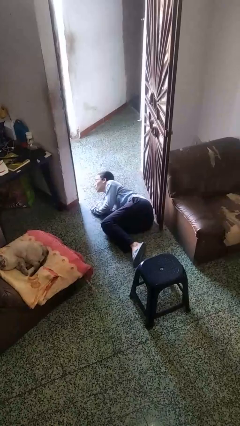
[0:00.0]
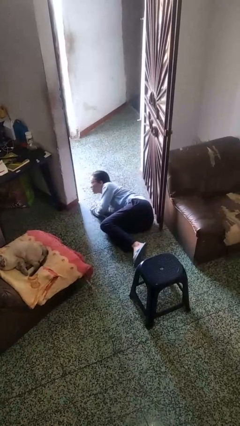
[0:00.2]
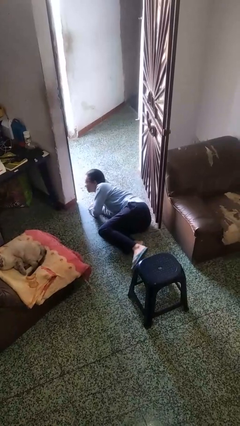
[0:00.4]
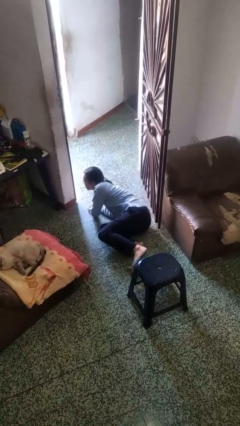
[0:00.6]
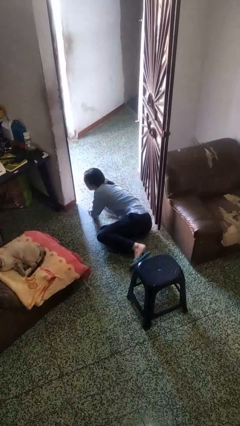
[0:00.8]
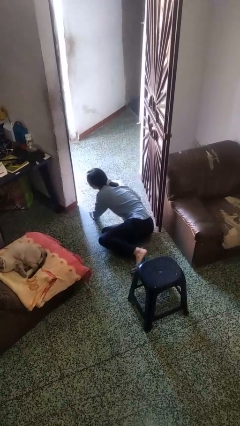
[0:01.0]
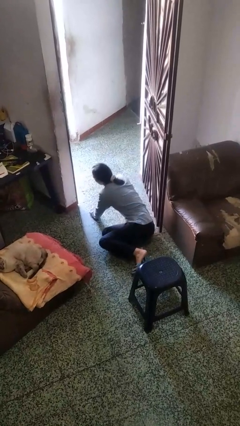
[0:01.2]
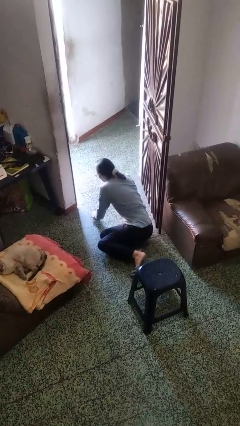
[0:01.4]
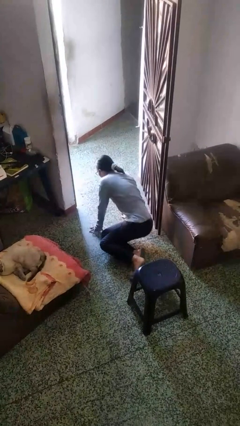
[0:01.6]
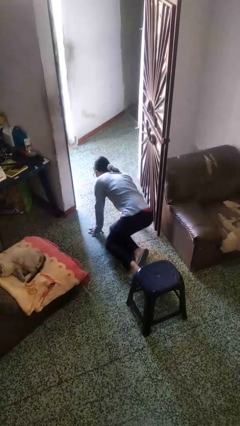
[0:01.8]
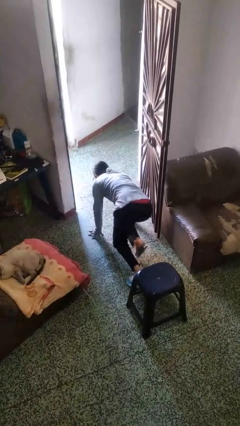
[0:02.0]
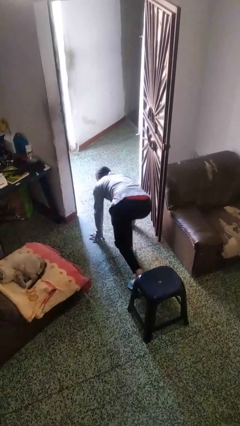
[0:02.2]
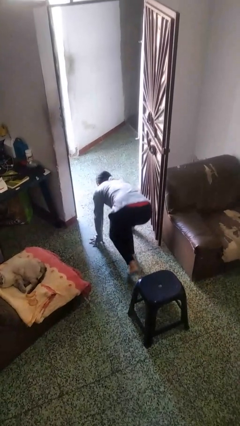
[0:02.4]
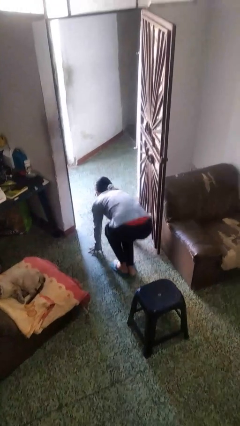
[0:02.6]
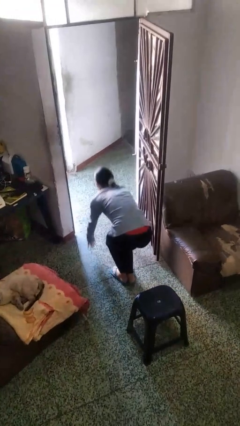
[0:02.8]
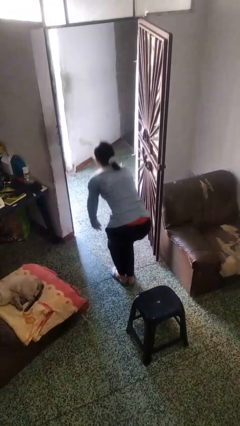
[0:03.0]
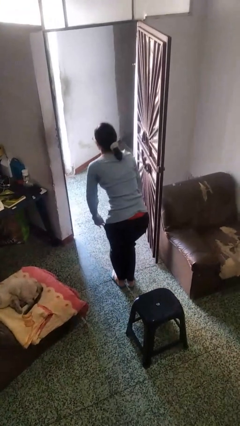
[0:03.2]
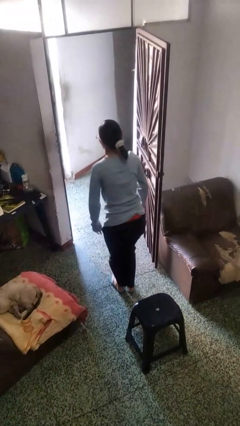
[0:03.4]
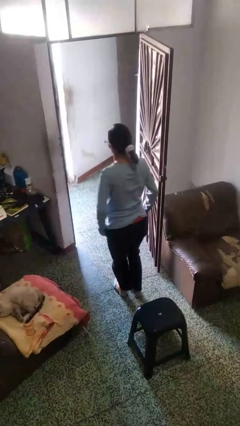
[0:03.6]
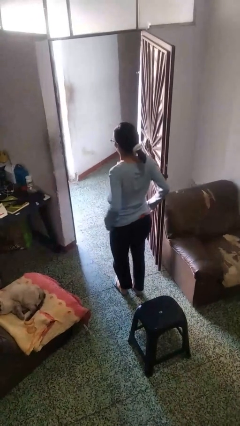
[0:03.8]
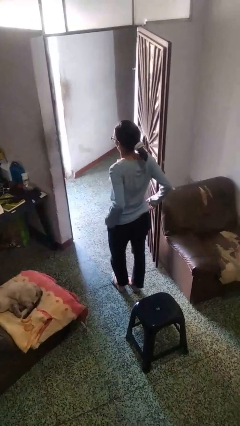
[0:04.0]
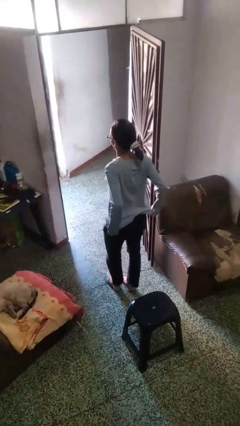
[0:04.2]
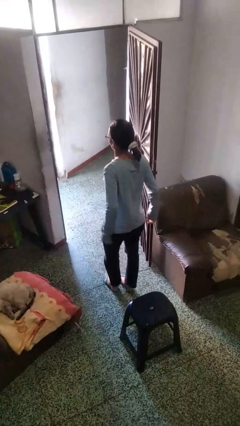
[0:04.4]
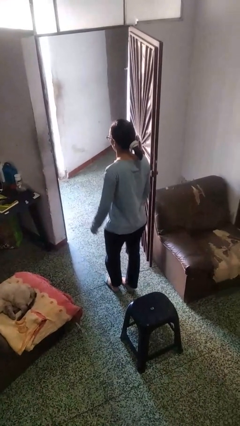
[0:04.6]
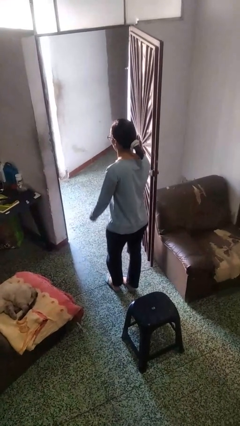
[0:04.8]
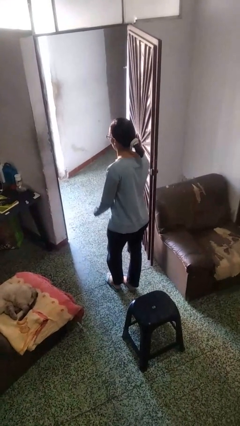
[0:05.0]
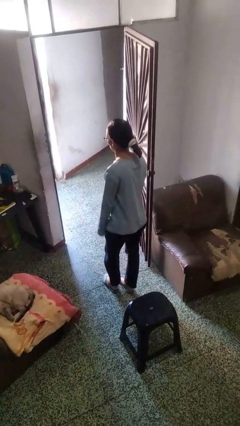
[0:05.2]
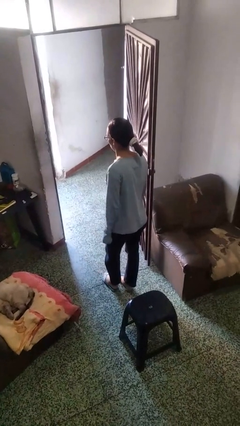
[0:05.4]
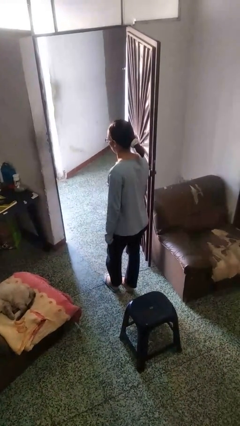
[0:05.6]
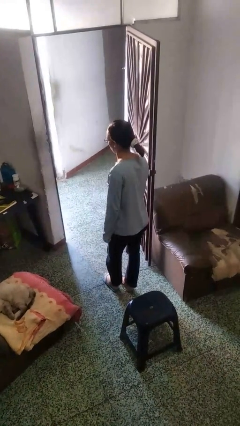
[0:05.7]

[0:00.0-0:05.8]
person stands up from floor

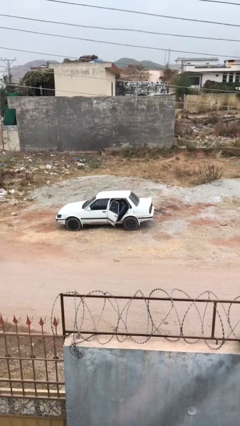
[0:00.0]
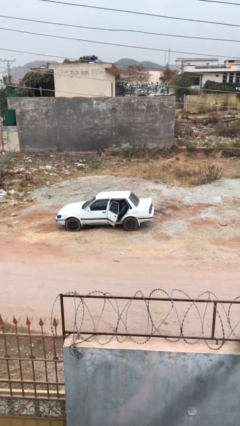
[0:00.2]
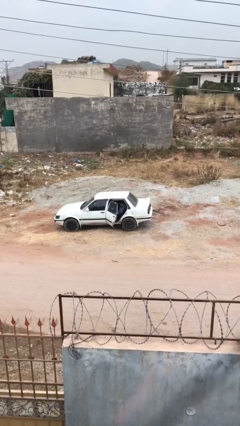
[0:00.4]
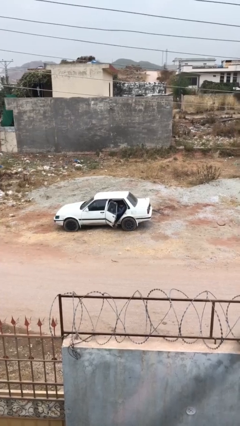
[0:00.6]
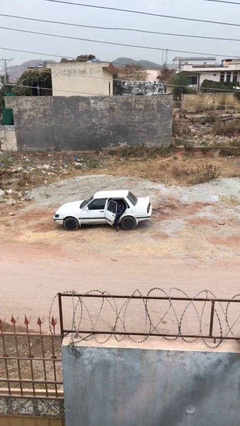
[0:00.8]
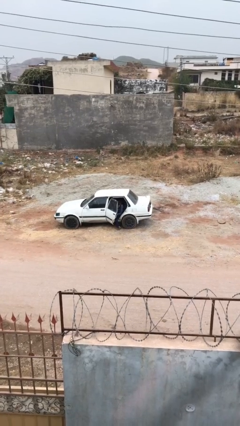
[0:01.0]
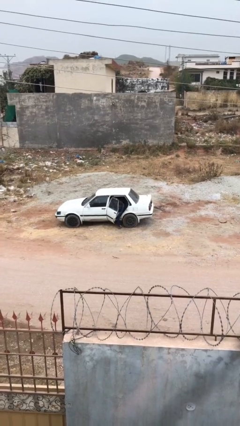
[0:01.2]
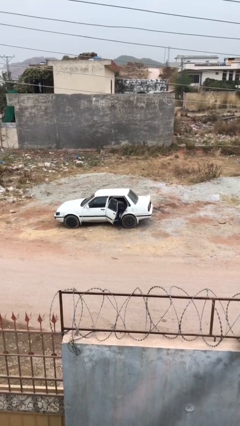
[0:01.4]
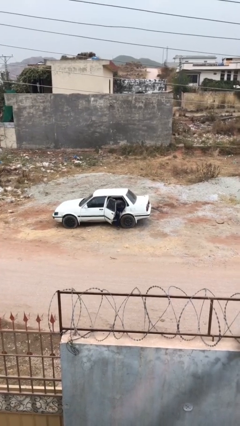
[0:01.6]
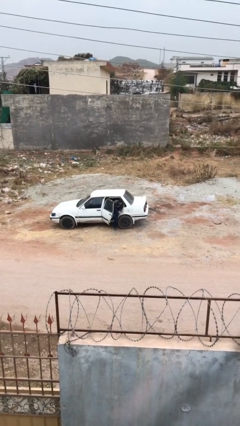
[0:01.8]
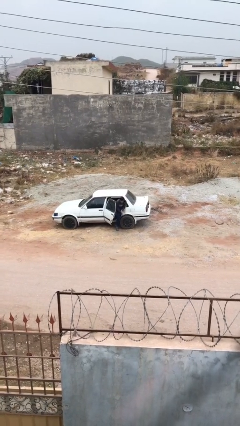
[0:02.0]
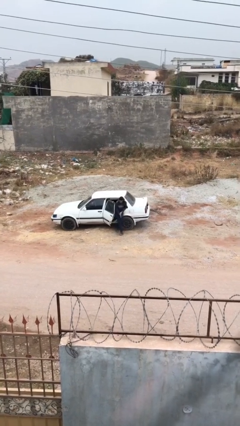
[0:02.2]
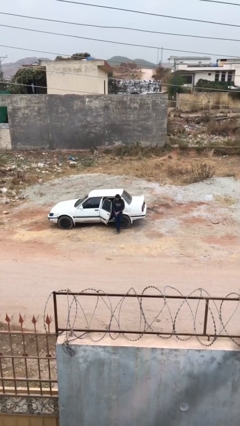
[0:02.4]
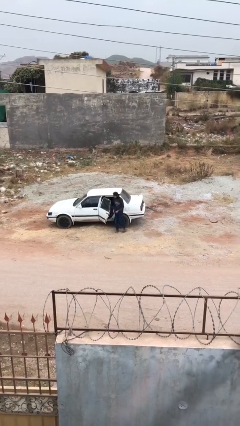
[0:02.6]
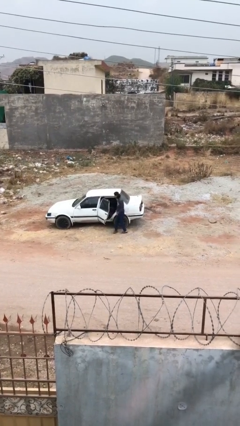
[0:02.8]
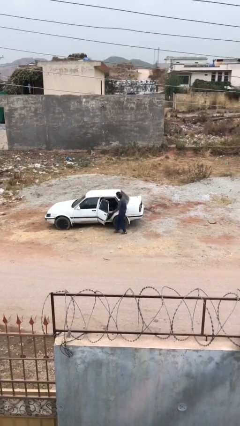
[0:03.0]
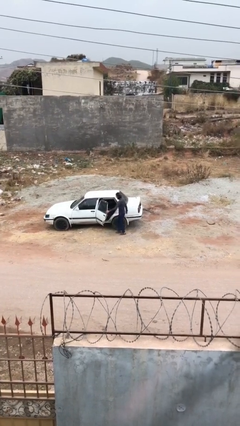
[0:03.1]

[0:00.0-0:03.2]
person exits car

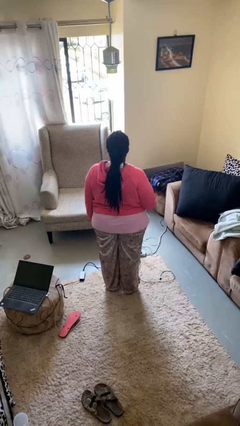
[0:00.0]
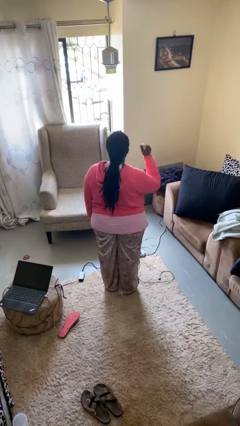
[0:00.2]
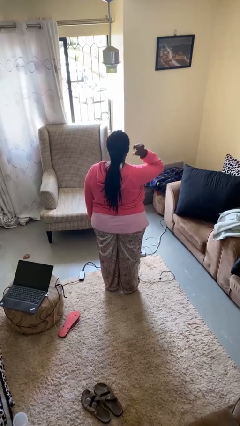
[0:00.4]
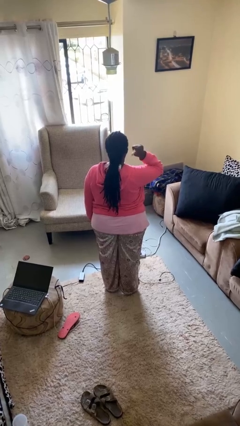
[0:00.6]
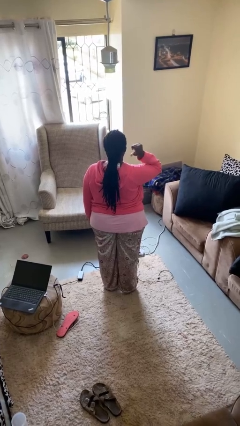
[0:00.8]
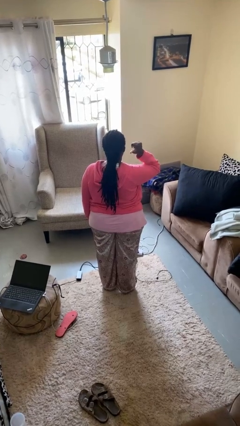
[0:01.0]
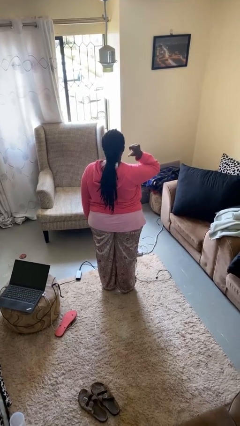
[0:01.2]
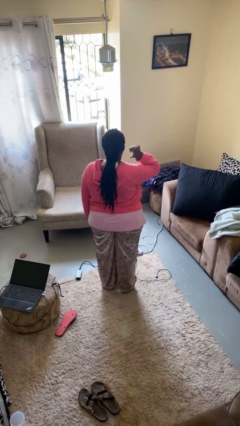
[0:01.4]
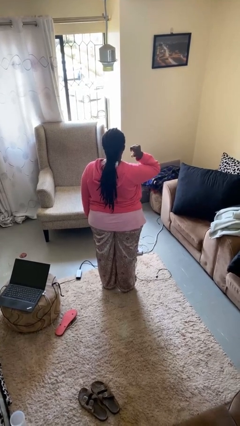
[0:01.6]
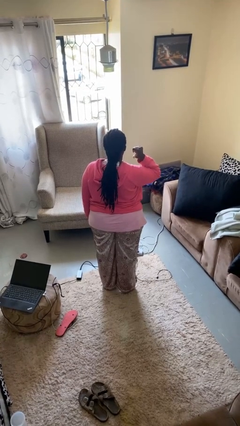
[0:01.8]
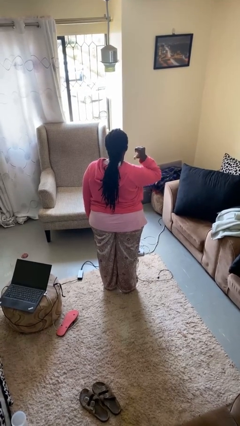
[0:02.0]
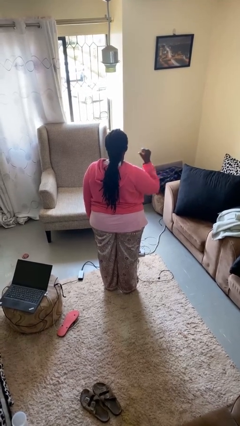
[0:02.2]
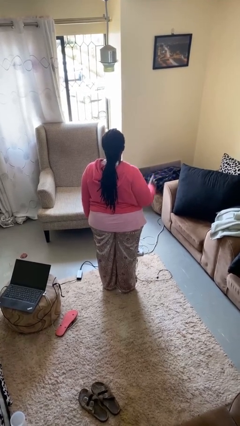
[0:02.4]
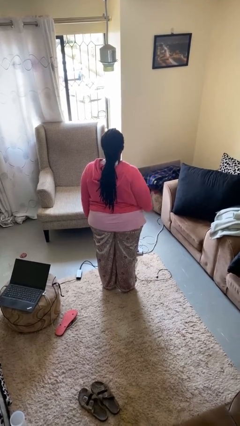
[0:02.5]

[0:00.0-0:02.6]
person gestures behind me

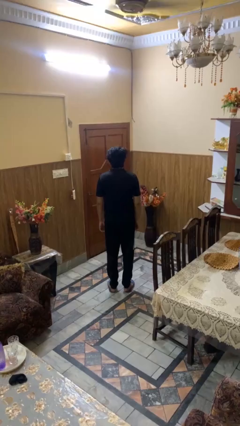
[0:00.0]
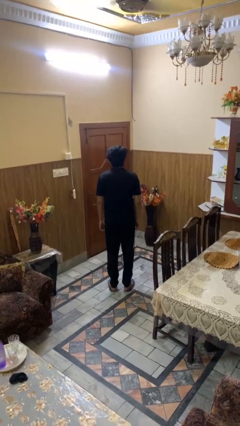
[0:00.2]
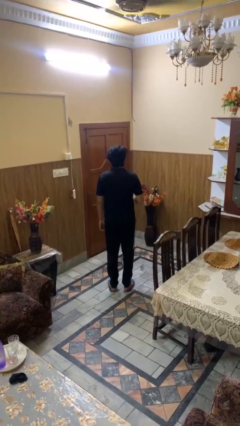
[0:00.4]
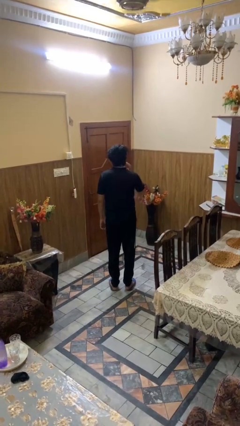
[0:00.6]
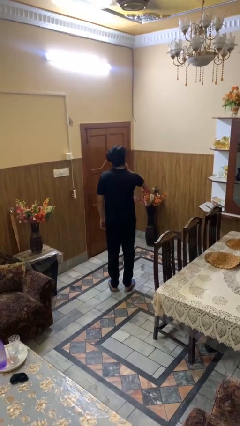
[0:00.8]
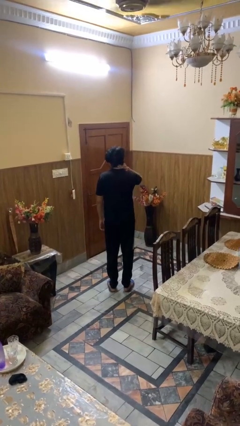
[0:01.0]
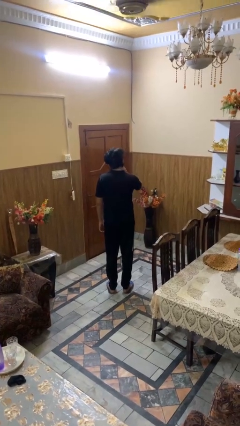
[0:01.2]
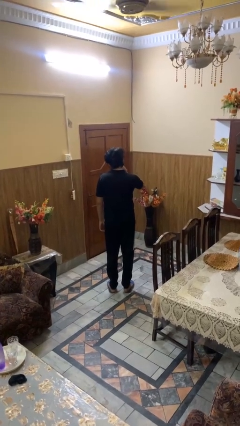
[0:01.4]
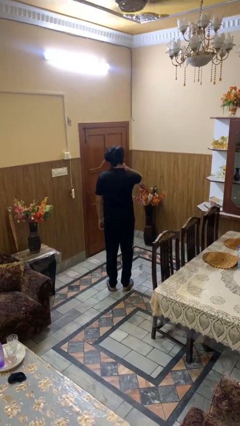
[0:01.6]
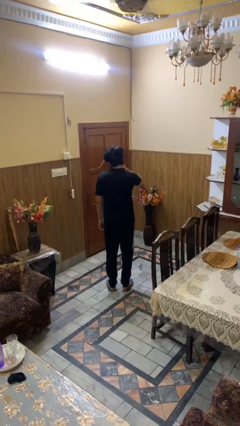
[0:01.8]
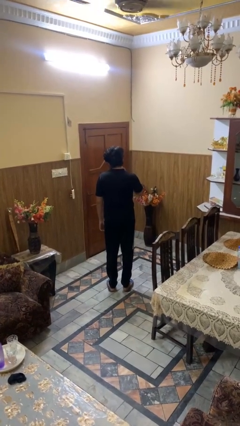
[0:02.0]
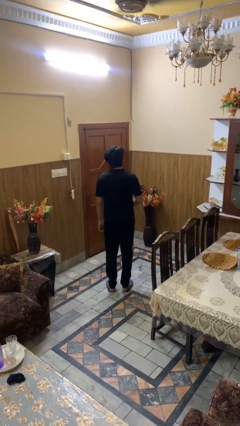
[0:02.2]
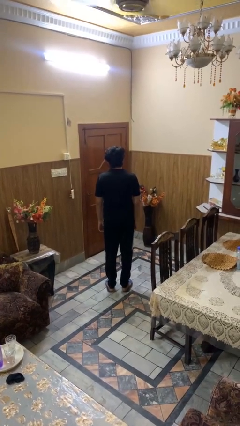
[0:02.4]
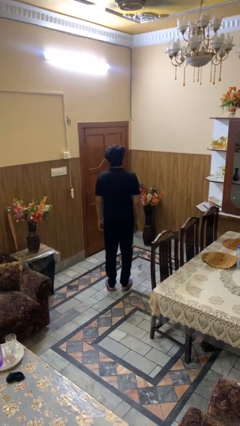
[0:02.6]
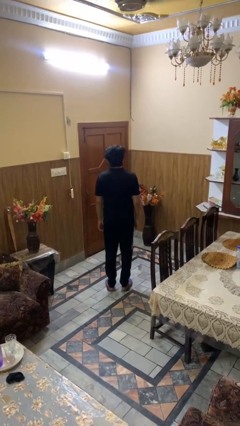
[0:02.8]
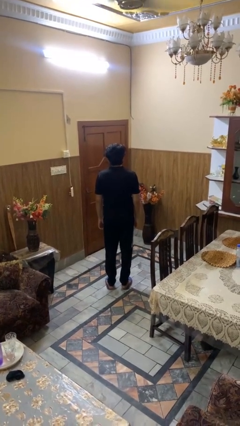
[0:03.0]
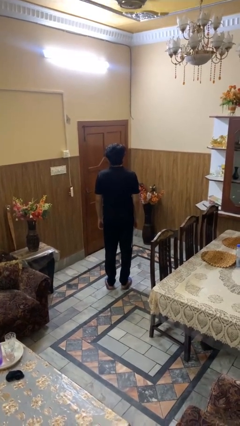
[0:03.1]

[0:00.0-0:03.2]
person rubs neck

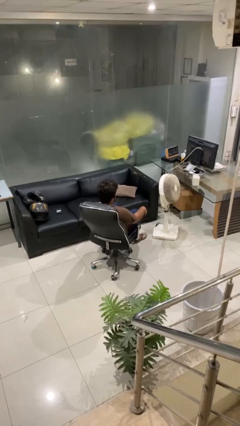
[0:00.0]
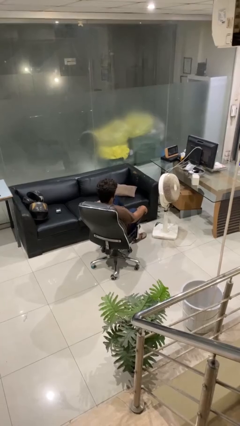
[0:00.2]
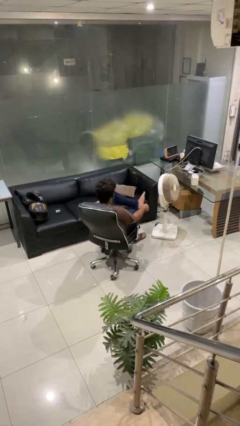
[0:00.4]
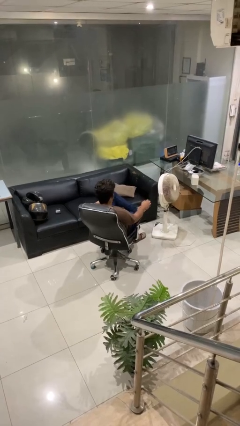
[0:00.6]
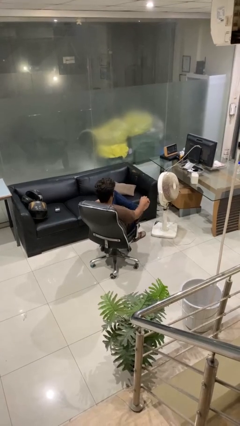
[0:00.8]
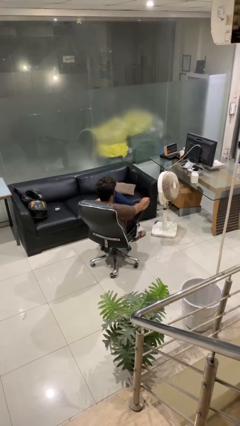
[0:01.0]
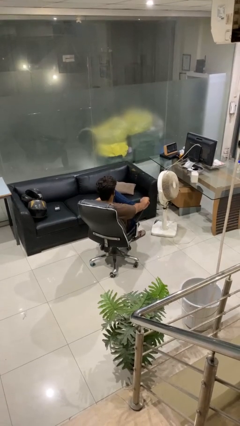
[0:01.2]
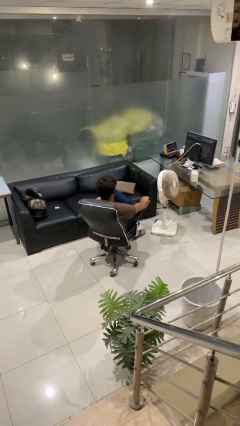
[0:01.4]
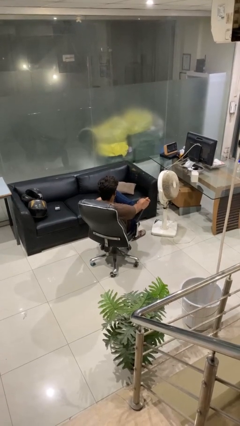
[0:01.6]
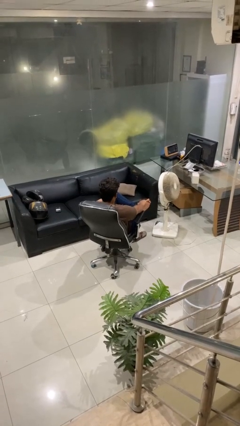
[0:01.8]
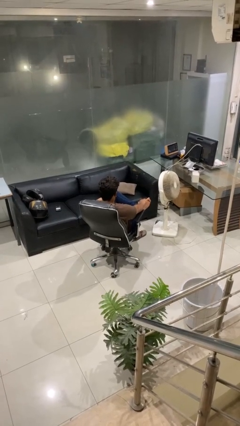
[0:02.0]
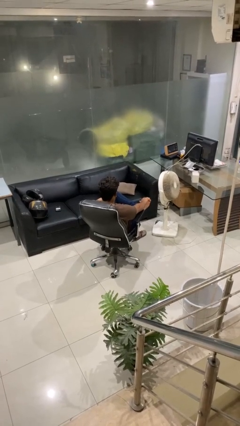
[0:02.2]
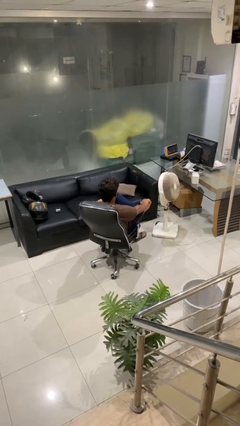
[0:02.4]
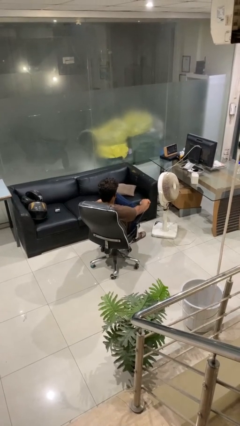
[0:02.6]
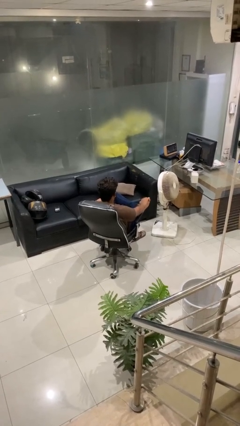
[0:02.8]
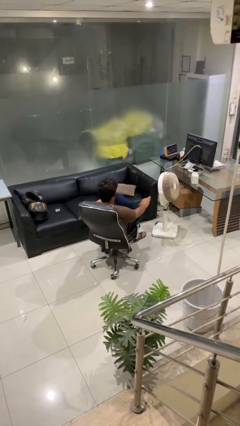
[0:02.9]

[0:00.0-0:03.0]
person rubs foot
